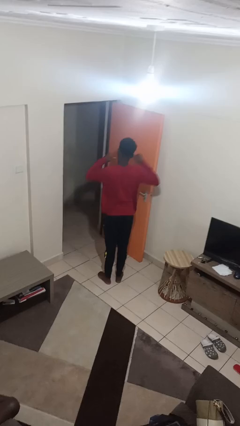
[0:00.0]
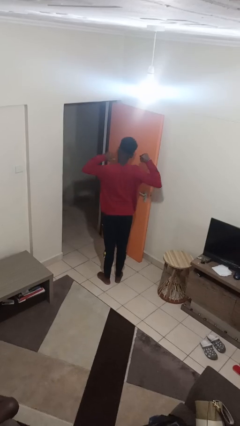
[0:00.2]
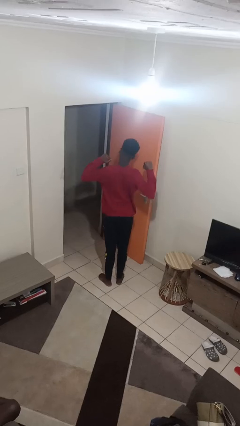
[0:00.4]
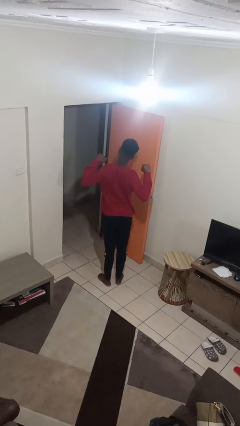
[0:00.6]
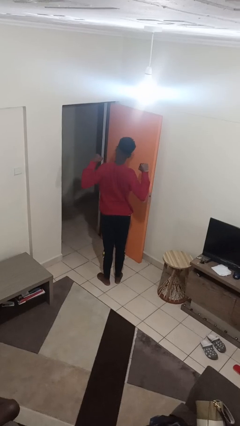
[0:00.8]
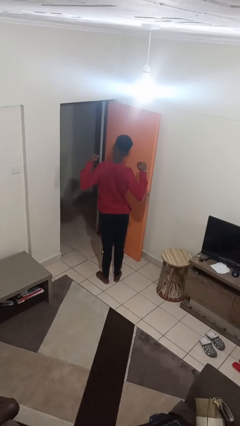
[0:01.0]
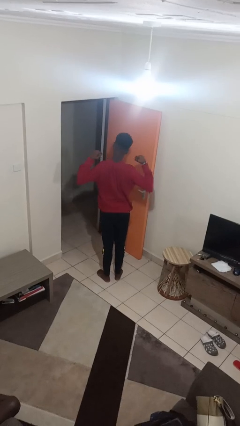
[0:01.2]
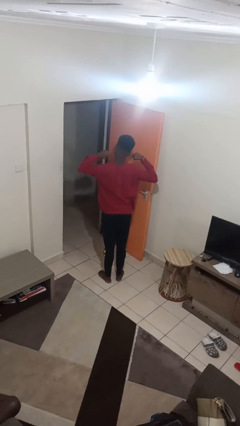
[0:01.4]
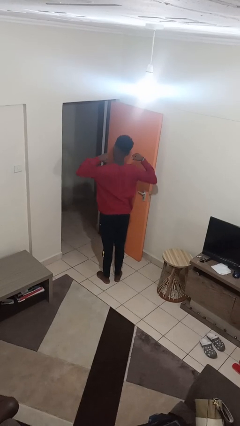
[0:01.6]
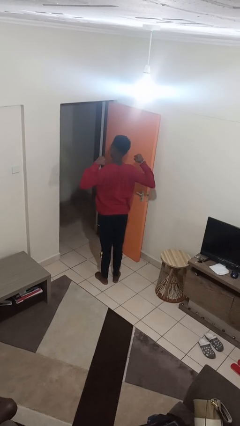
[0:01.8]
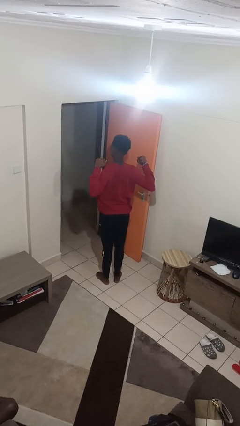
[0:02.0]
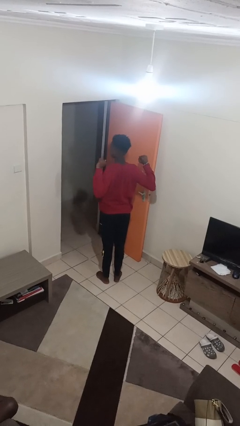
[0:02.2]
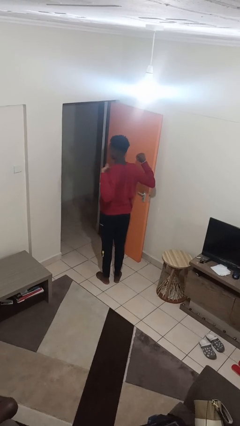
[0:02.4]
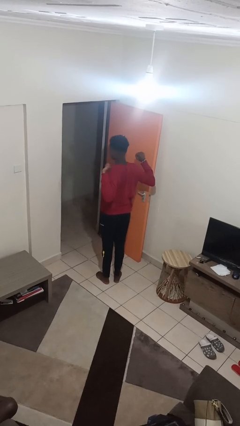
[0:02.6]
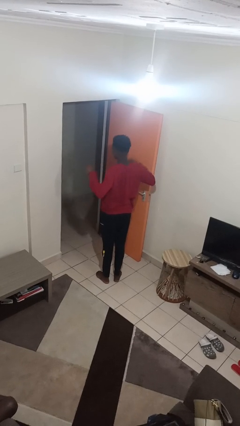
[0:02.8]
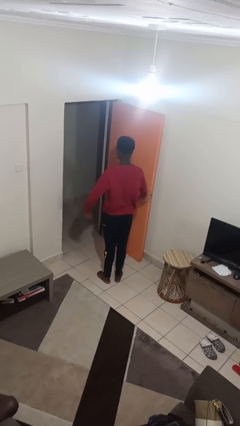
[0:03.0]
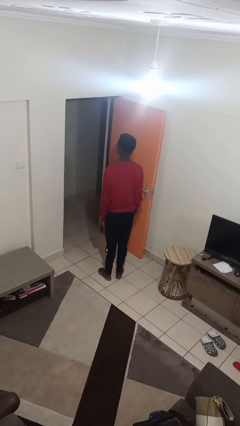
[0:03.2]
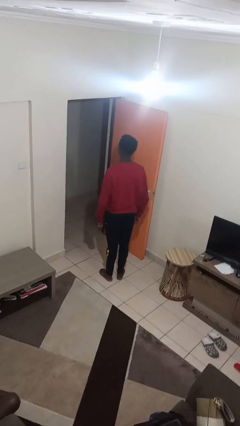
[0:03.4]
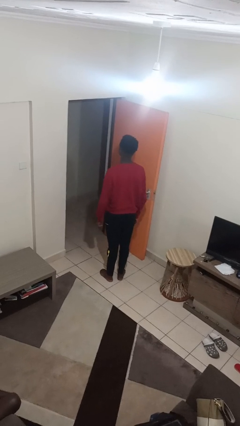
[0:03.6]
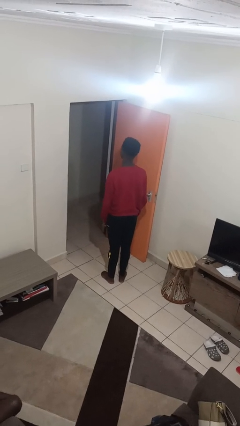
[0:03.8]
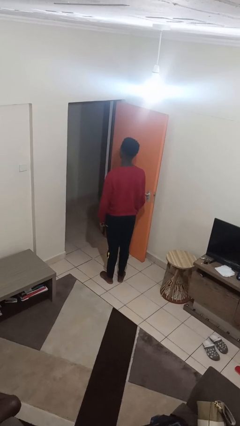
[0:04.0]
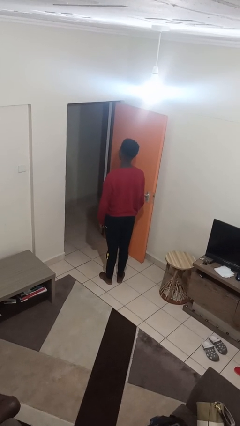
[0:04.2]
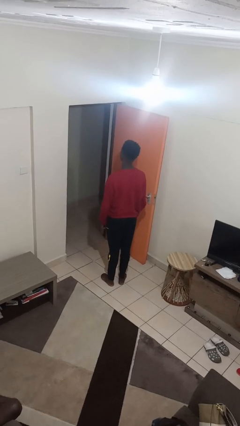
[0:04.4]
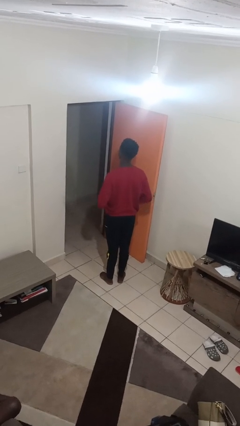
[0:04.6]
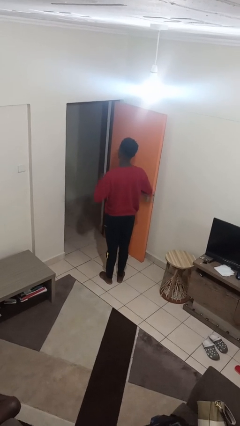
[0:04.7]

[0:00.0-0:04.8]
person stretches arms to side

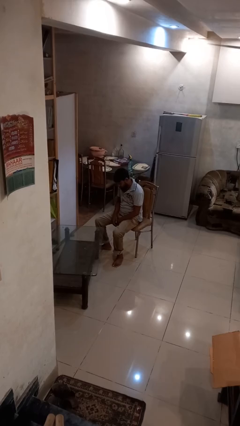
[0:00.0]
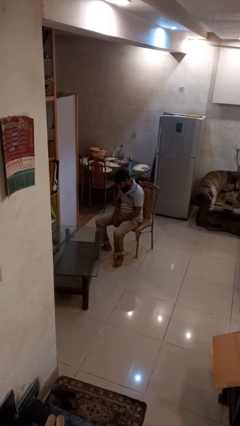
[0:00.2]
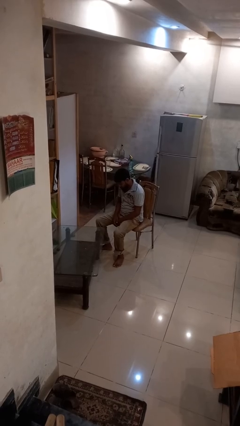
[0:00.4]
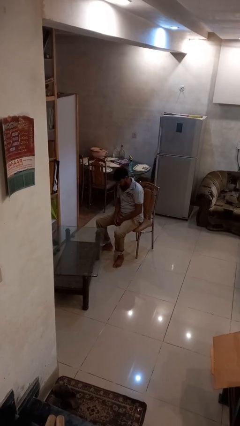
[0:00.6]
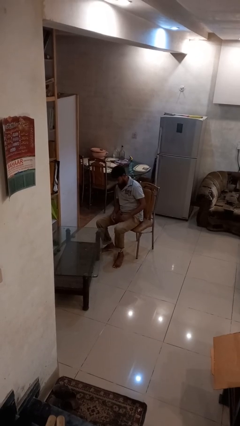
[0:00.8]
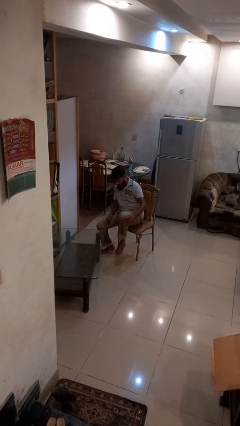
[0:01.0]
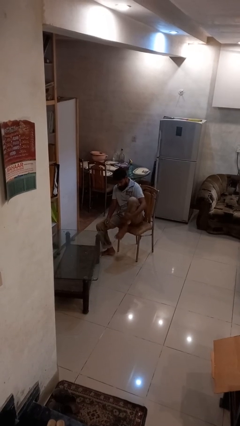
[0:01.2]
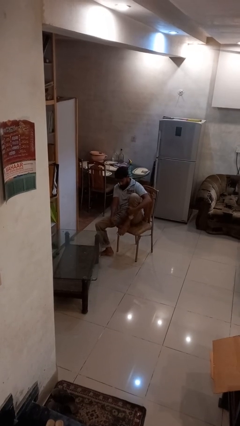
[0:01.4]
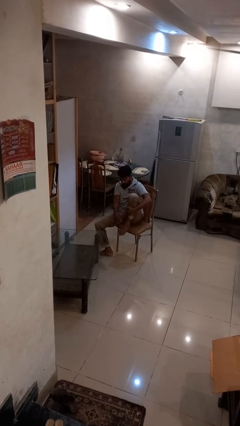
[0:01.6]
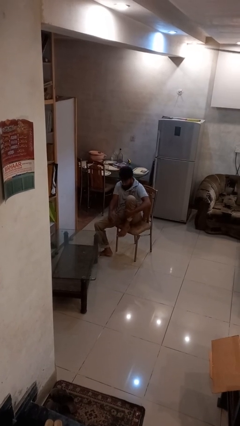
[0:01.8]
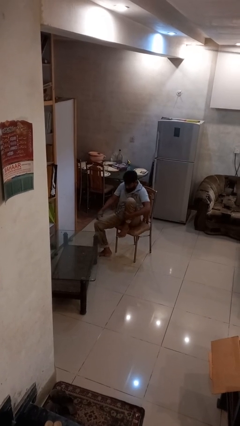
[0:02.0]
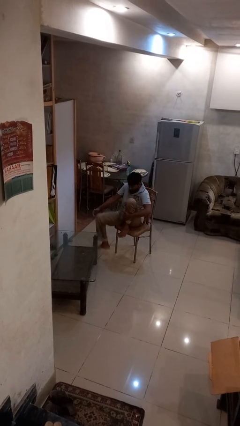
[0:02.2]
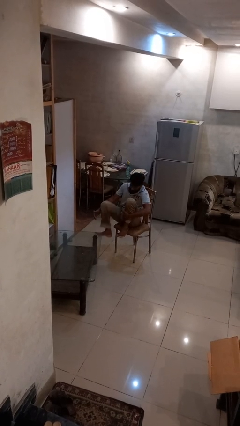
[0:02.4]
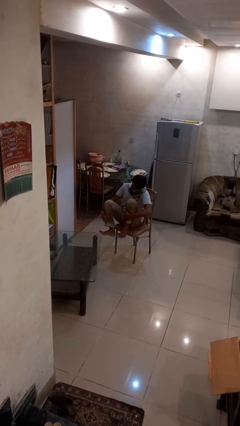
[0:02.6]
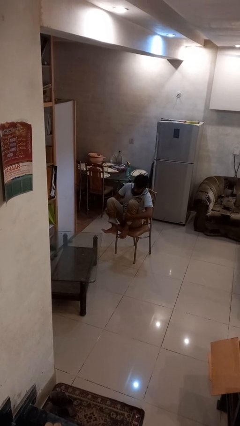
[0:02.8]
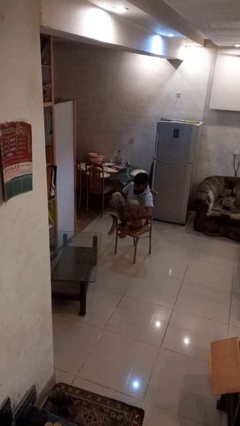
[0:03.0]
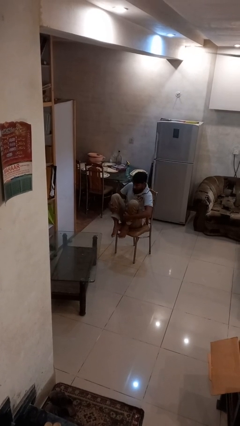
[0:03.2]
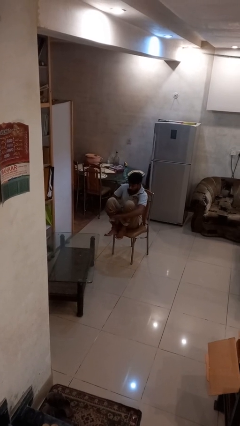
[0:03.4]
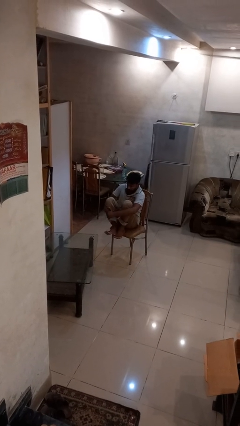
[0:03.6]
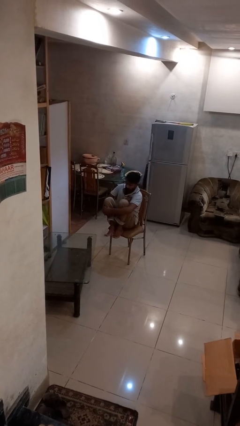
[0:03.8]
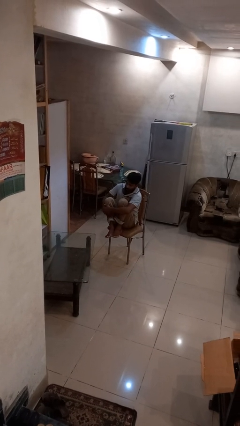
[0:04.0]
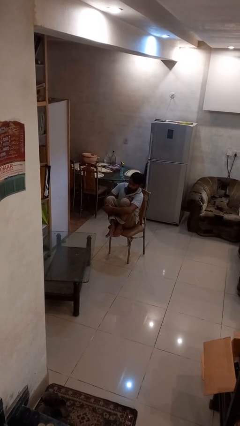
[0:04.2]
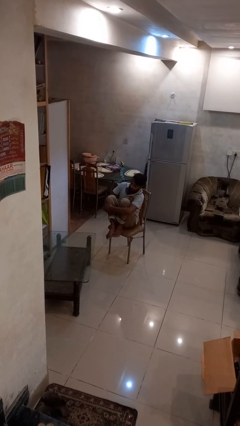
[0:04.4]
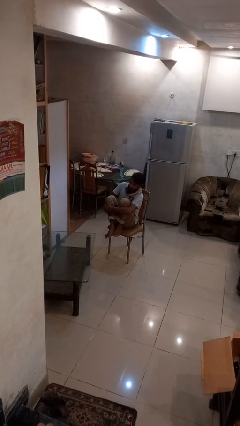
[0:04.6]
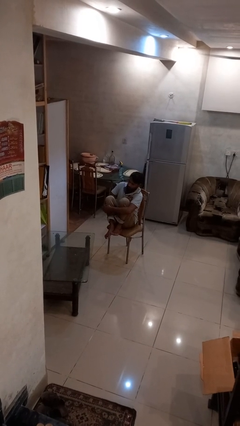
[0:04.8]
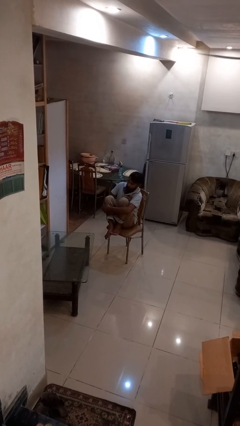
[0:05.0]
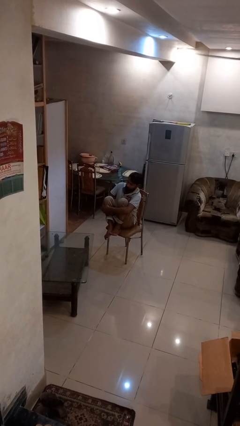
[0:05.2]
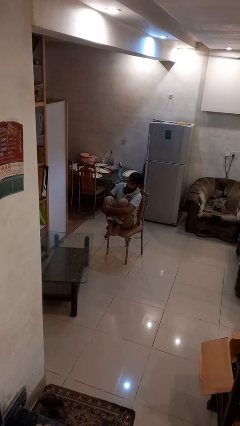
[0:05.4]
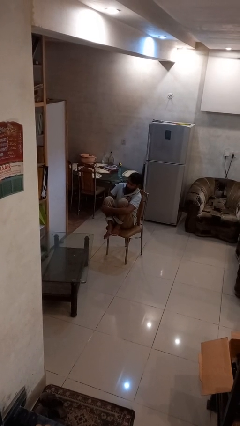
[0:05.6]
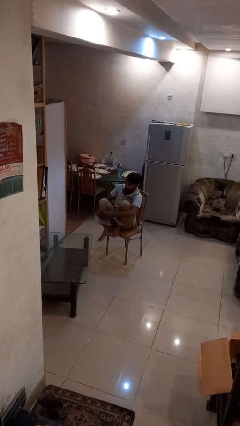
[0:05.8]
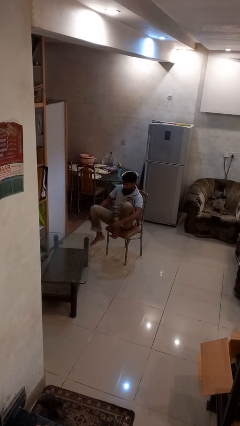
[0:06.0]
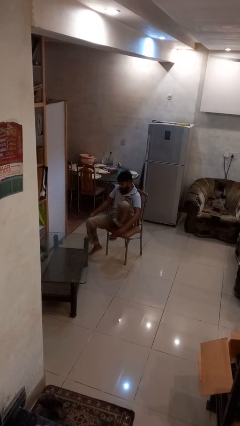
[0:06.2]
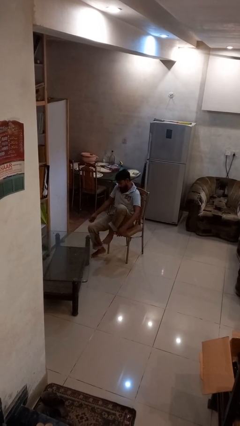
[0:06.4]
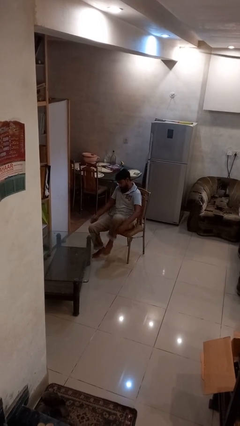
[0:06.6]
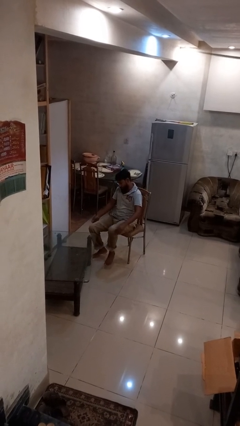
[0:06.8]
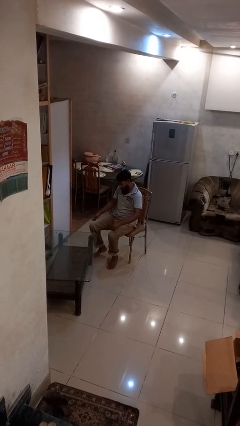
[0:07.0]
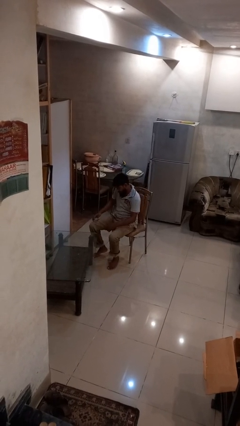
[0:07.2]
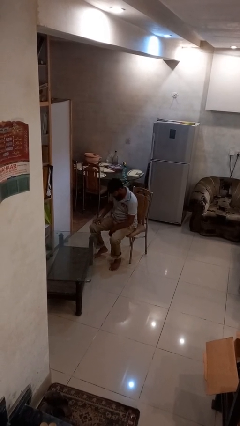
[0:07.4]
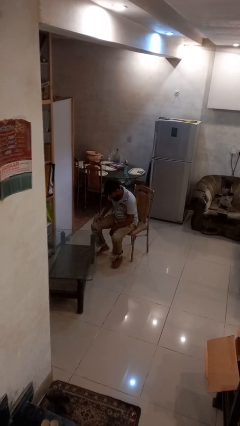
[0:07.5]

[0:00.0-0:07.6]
person puts feet up

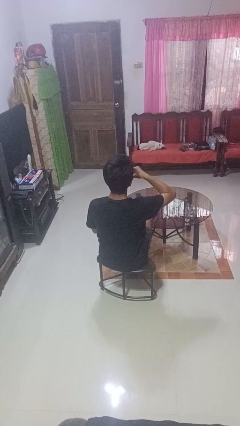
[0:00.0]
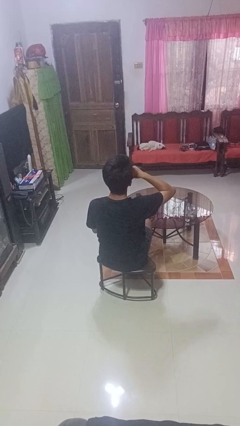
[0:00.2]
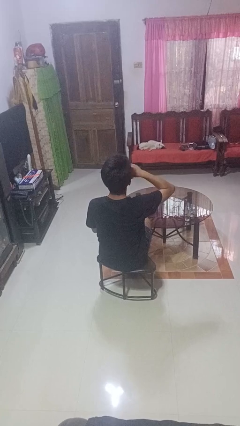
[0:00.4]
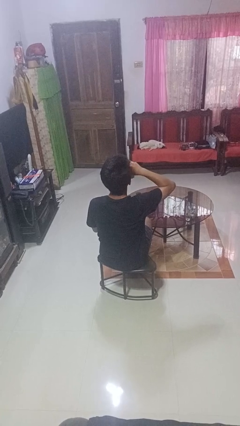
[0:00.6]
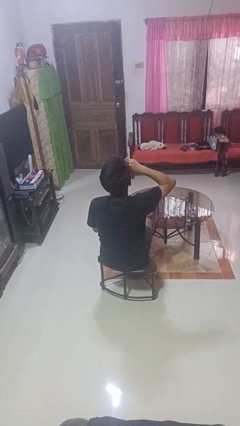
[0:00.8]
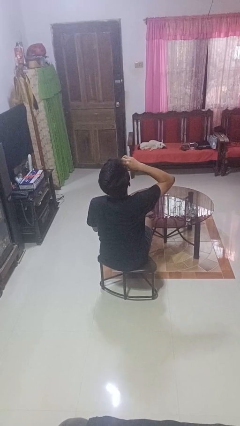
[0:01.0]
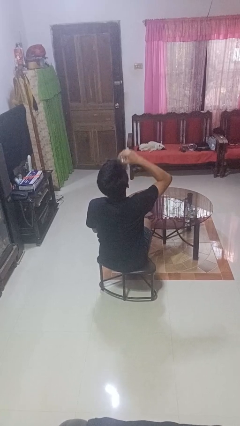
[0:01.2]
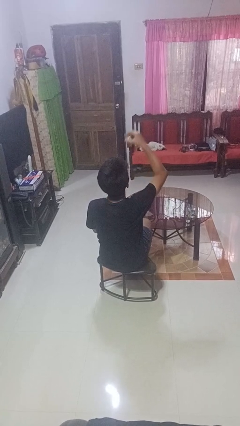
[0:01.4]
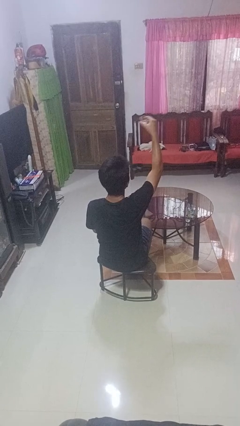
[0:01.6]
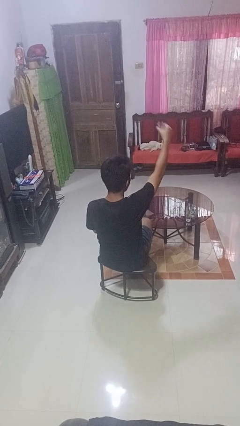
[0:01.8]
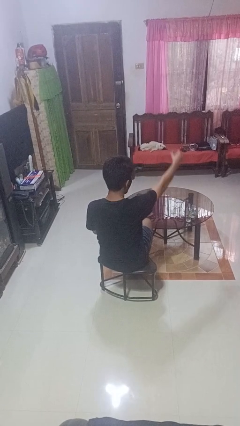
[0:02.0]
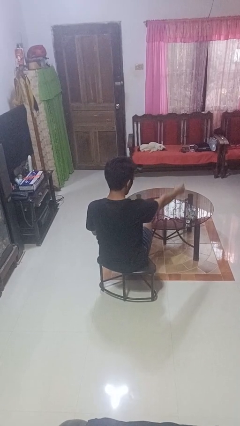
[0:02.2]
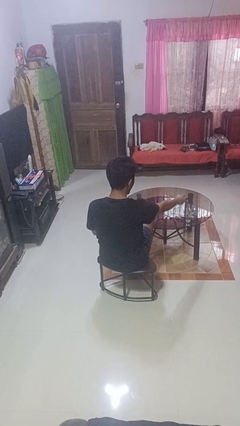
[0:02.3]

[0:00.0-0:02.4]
person drinks from shotglass

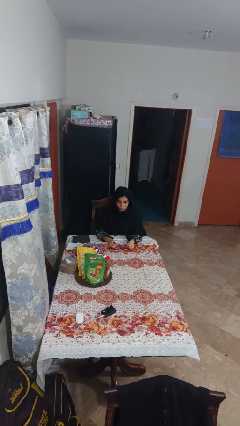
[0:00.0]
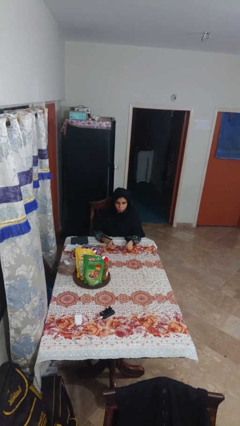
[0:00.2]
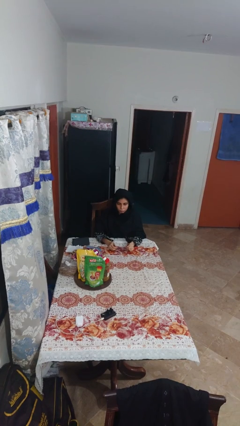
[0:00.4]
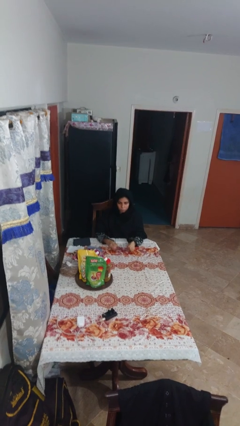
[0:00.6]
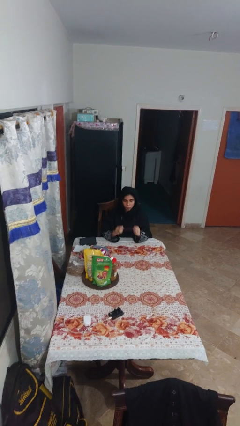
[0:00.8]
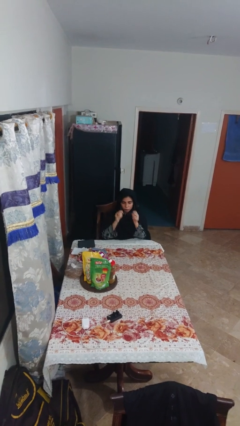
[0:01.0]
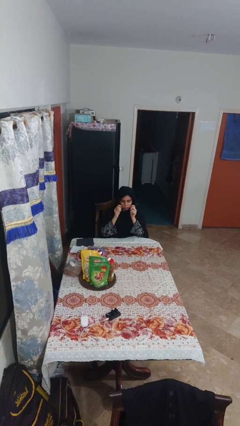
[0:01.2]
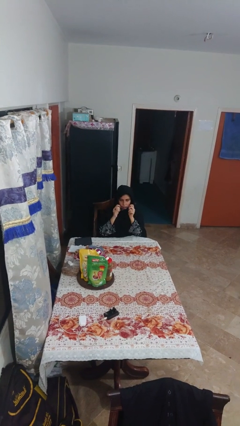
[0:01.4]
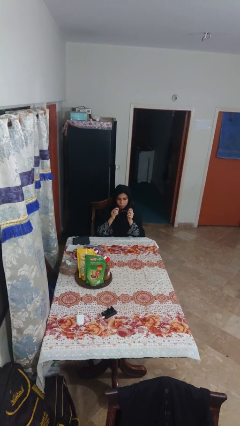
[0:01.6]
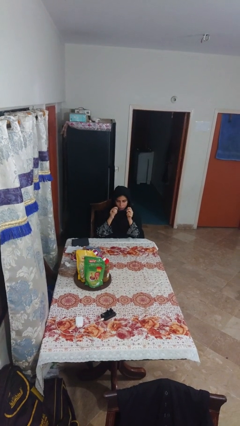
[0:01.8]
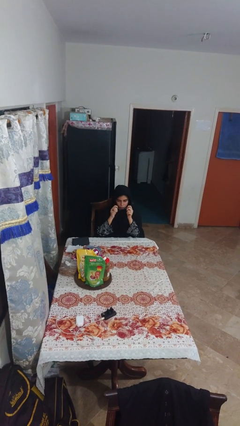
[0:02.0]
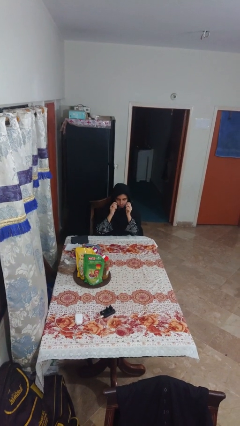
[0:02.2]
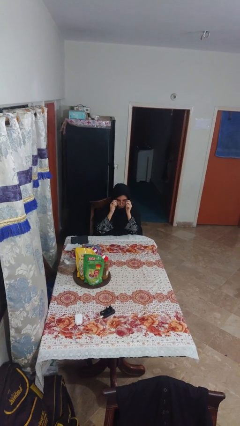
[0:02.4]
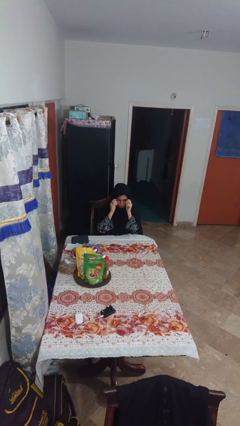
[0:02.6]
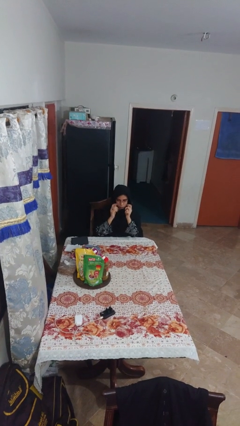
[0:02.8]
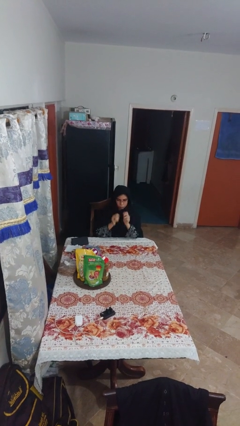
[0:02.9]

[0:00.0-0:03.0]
person puts on glasses
